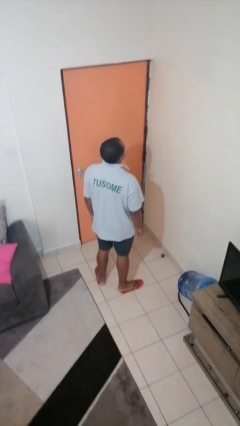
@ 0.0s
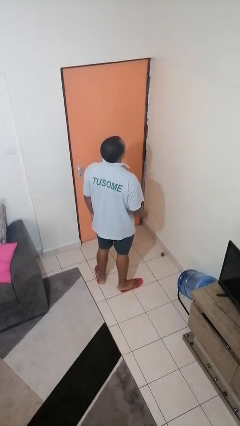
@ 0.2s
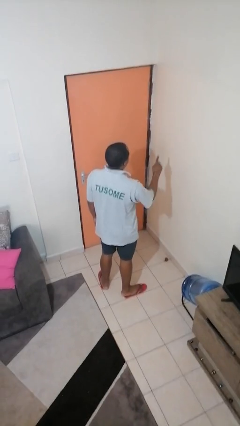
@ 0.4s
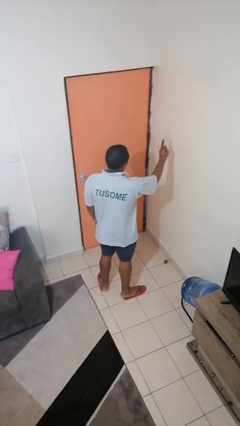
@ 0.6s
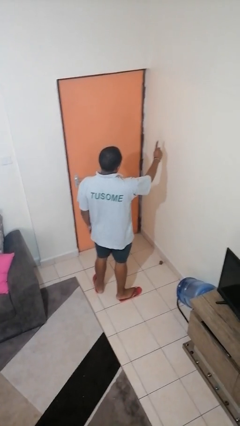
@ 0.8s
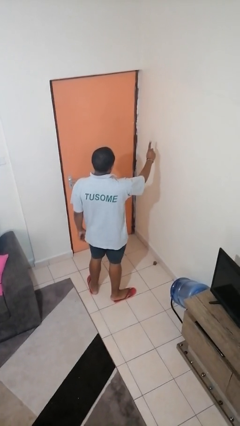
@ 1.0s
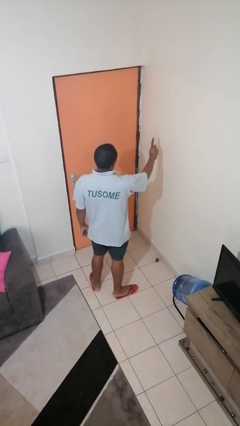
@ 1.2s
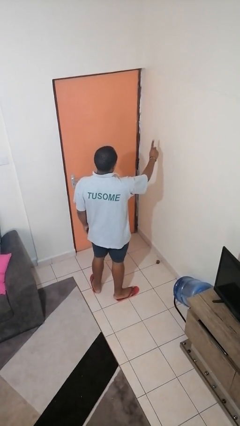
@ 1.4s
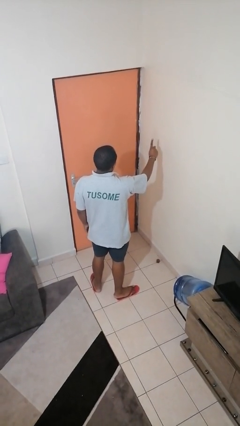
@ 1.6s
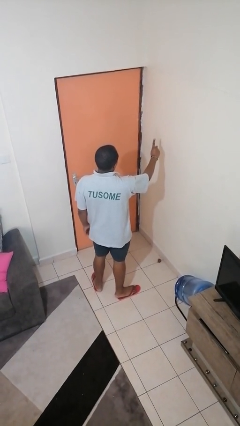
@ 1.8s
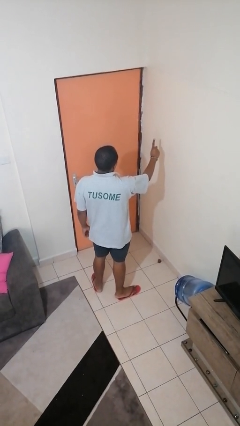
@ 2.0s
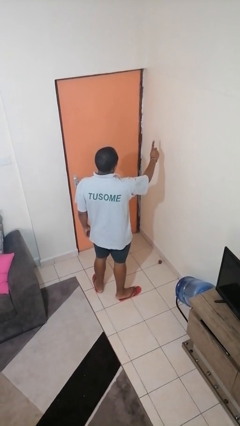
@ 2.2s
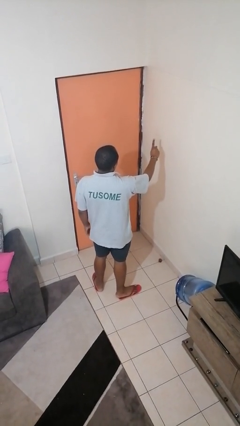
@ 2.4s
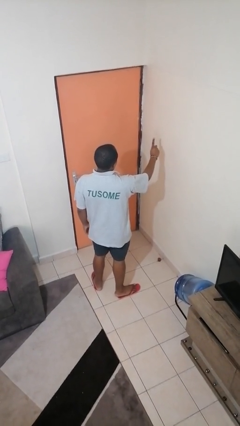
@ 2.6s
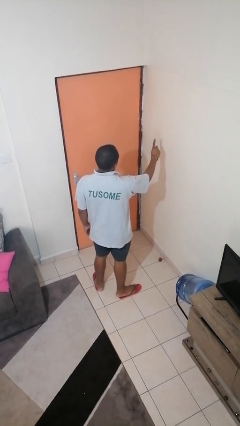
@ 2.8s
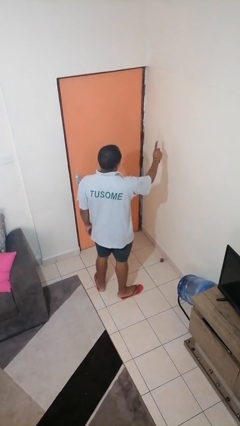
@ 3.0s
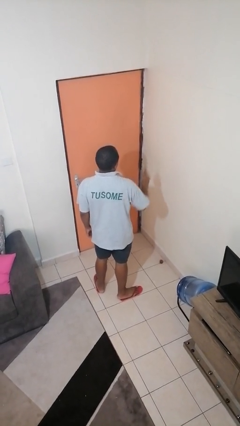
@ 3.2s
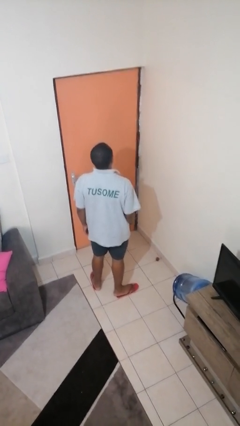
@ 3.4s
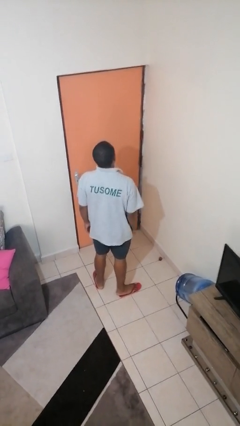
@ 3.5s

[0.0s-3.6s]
person gestures number one

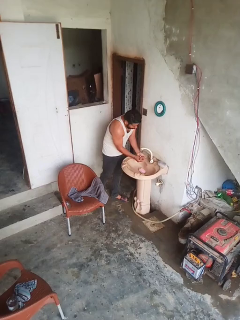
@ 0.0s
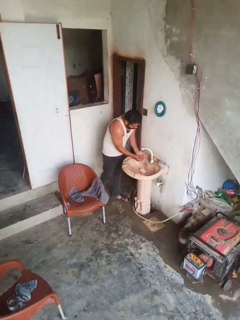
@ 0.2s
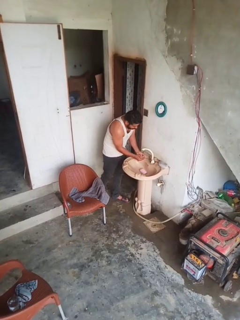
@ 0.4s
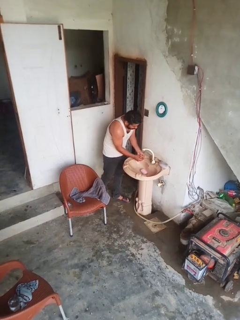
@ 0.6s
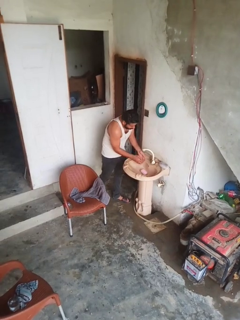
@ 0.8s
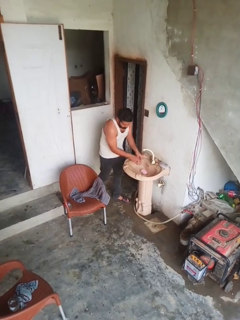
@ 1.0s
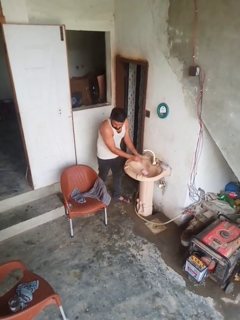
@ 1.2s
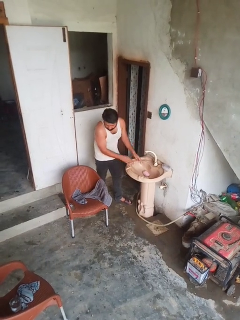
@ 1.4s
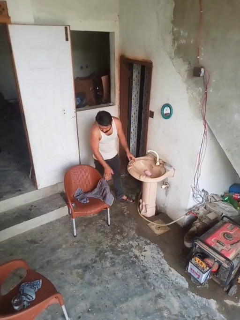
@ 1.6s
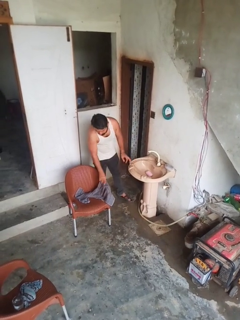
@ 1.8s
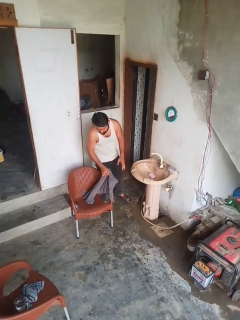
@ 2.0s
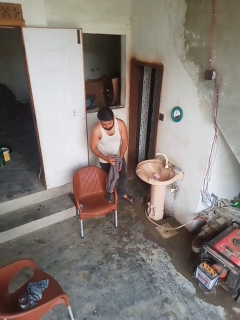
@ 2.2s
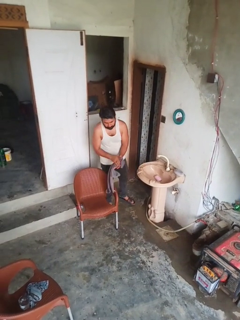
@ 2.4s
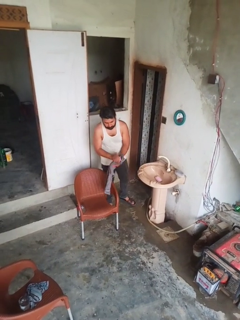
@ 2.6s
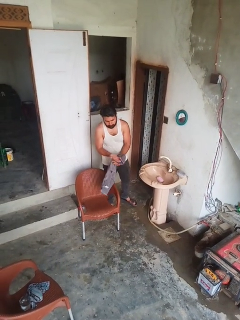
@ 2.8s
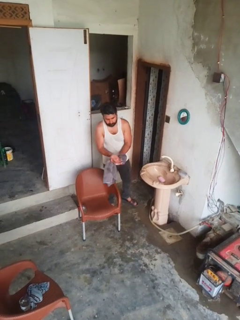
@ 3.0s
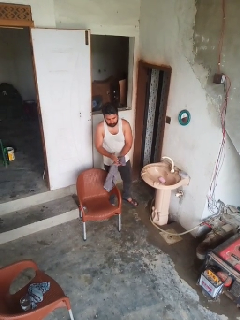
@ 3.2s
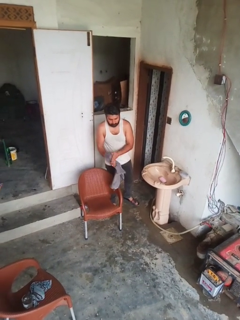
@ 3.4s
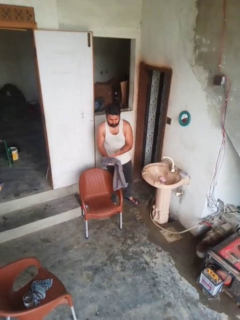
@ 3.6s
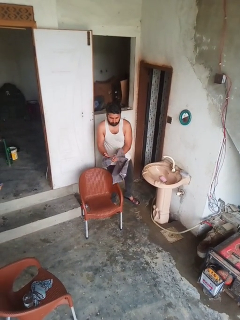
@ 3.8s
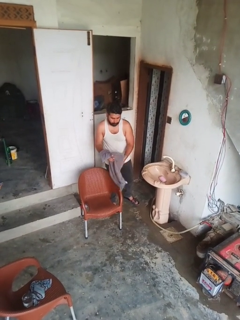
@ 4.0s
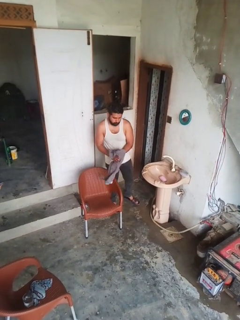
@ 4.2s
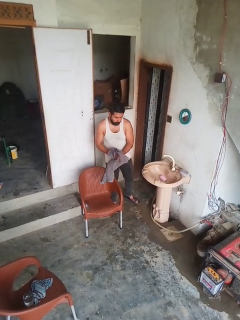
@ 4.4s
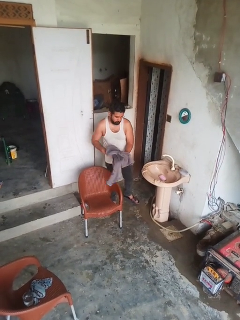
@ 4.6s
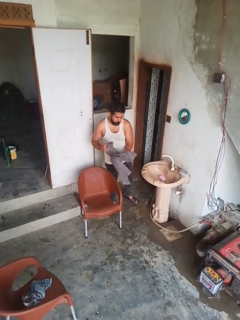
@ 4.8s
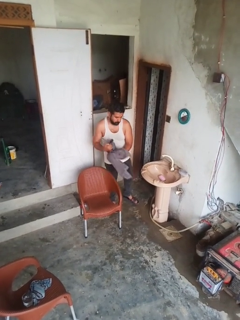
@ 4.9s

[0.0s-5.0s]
person dries hands with towel

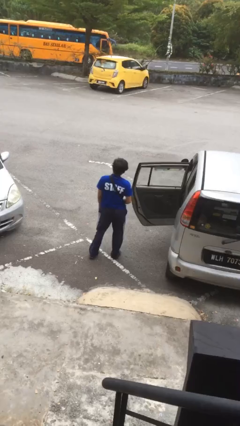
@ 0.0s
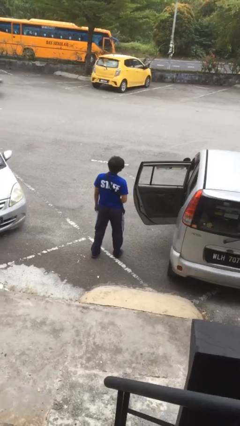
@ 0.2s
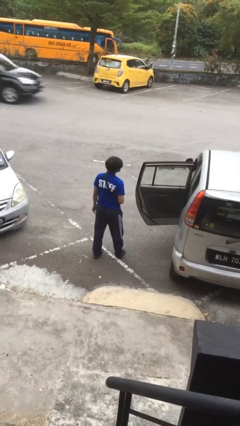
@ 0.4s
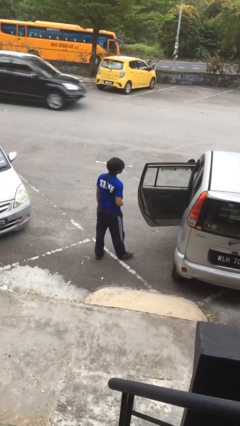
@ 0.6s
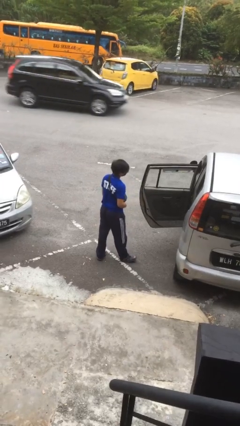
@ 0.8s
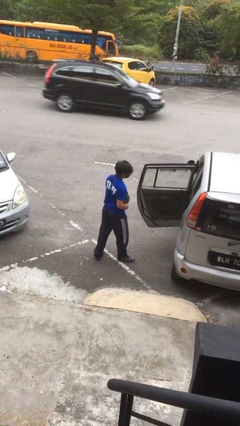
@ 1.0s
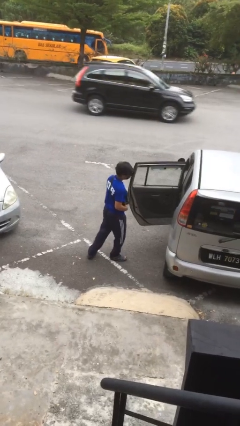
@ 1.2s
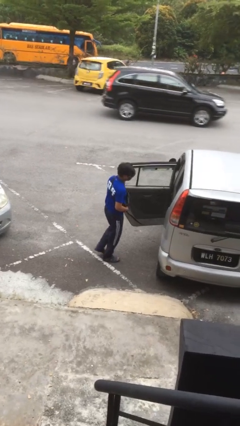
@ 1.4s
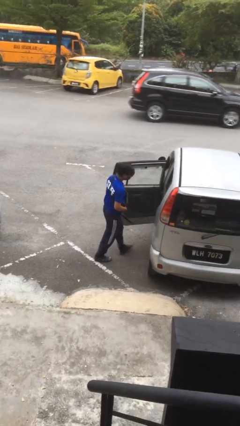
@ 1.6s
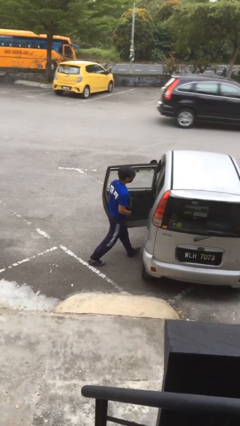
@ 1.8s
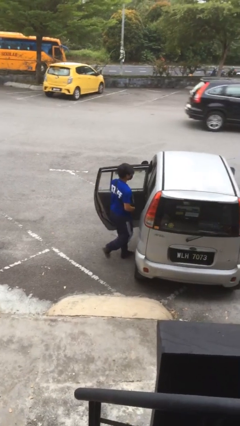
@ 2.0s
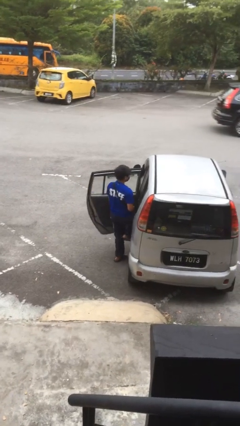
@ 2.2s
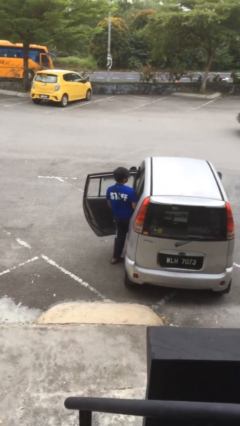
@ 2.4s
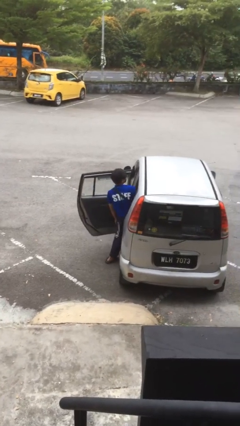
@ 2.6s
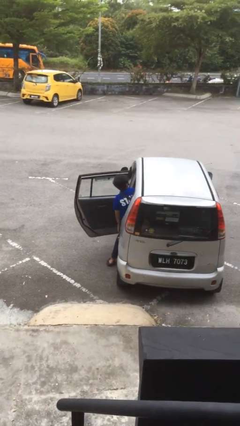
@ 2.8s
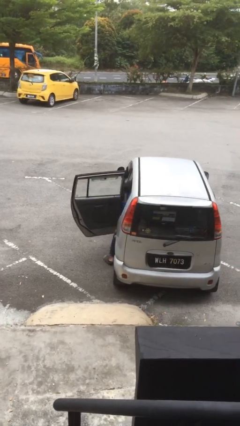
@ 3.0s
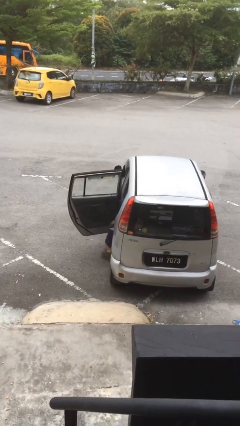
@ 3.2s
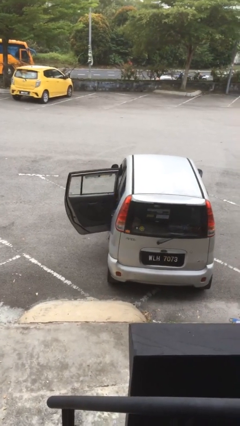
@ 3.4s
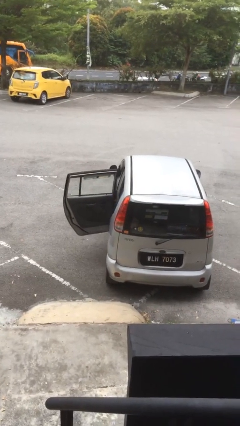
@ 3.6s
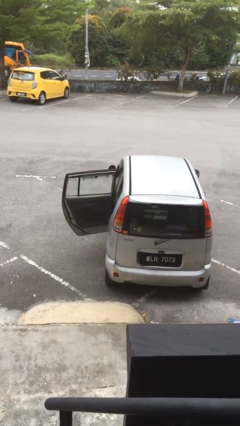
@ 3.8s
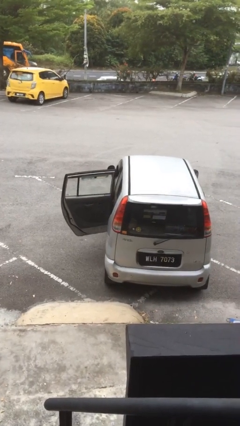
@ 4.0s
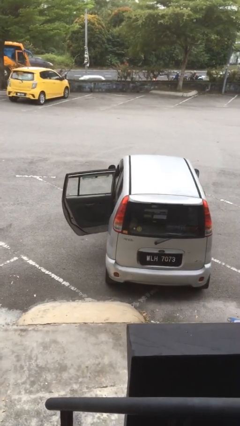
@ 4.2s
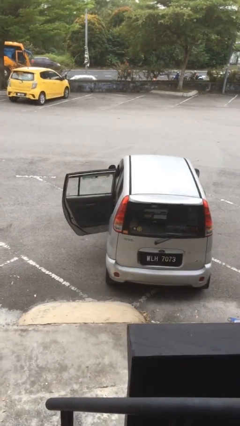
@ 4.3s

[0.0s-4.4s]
person enters car

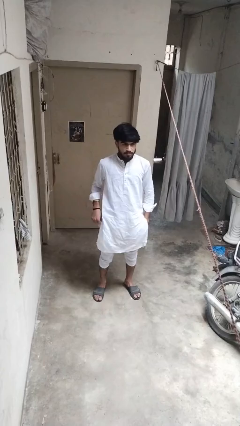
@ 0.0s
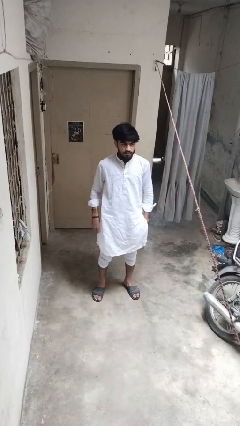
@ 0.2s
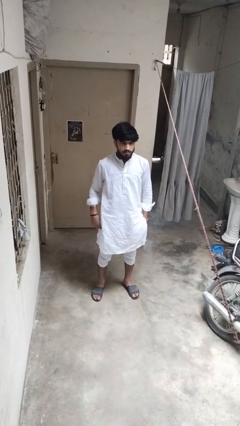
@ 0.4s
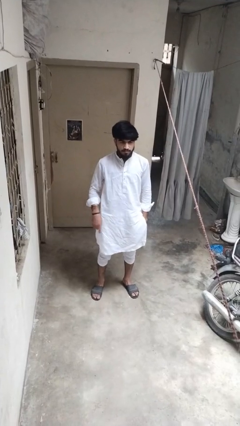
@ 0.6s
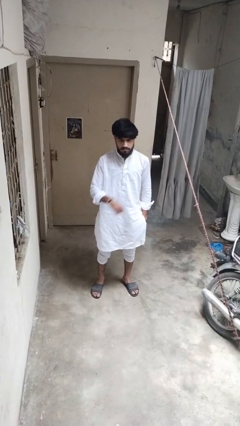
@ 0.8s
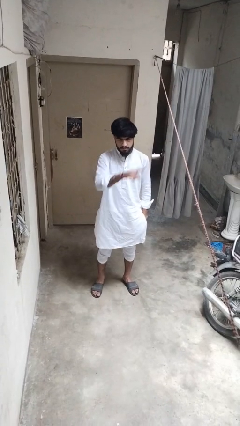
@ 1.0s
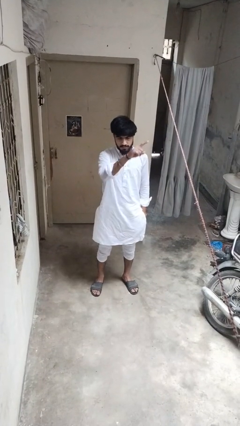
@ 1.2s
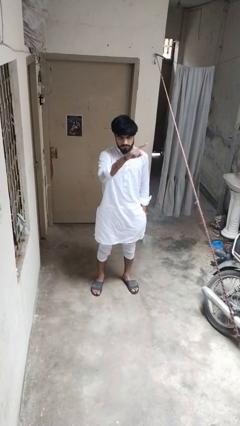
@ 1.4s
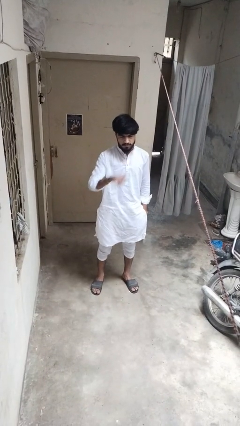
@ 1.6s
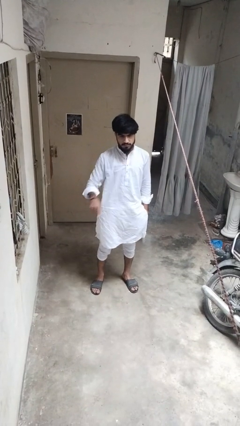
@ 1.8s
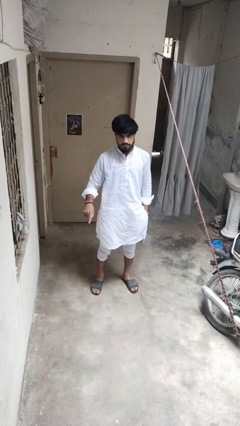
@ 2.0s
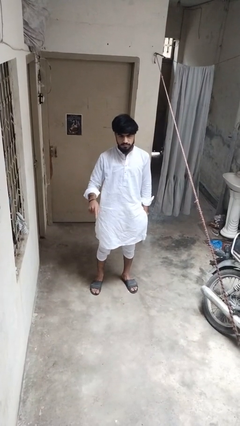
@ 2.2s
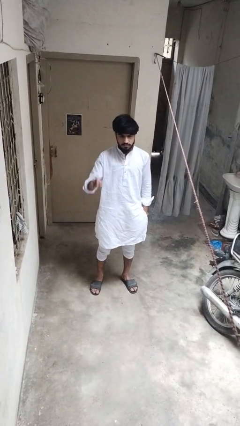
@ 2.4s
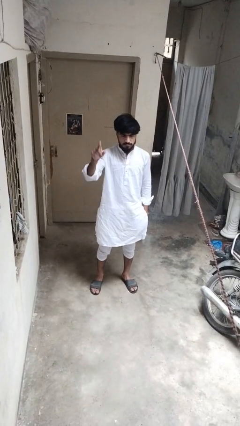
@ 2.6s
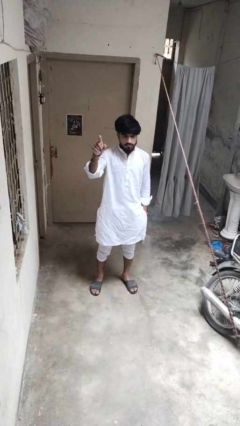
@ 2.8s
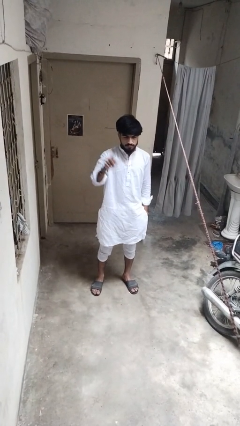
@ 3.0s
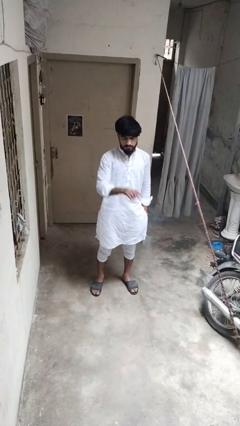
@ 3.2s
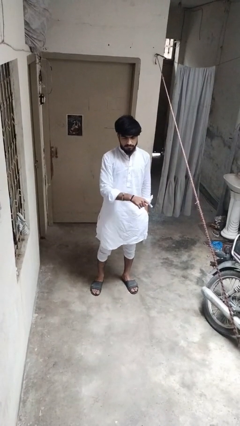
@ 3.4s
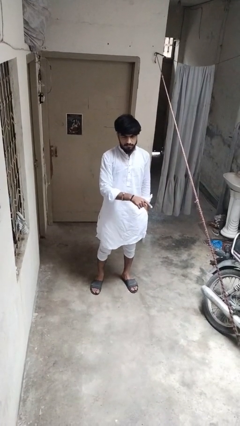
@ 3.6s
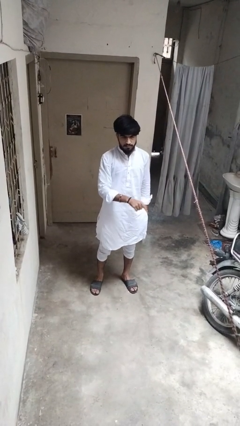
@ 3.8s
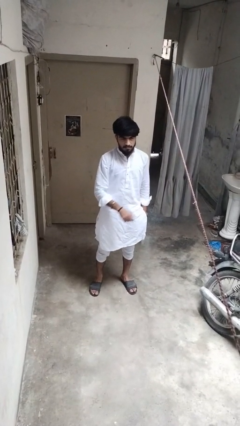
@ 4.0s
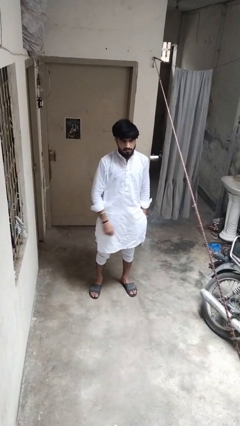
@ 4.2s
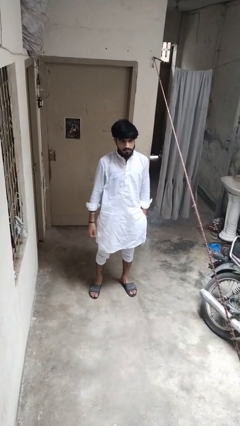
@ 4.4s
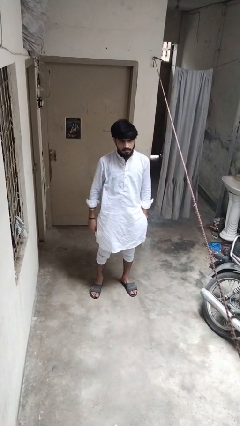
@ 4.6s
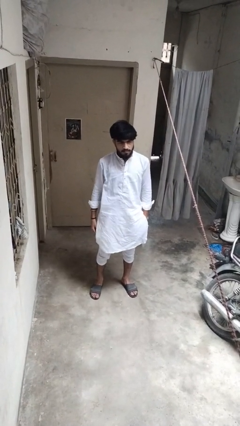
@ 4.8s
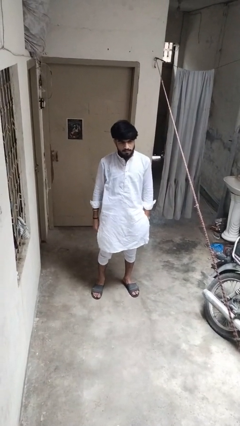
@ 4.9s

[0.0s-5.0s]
person gestures cut

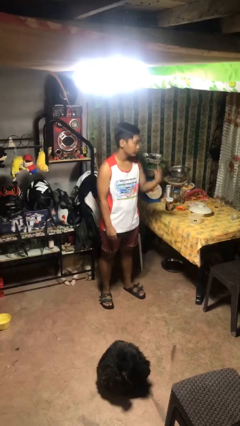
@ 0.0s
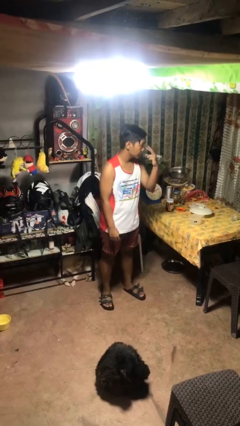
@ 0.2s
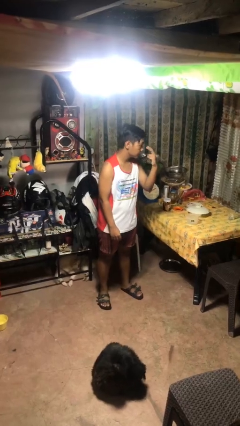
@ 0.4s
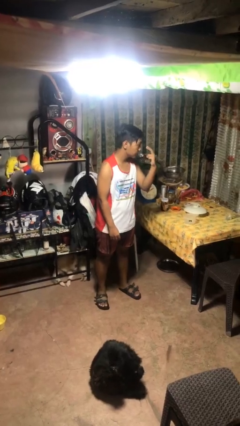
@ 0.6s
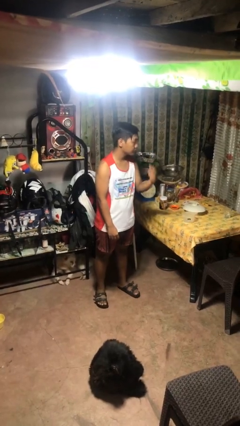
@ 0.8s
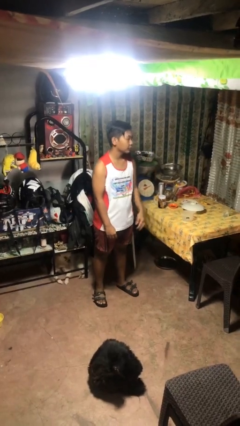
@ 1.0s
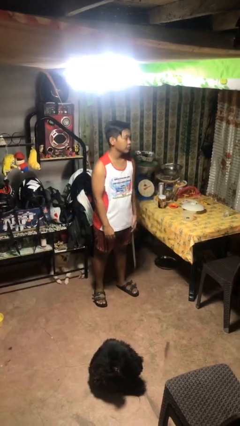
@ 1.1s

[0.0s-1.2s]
person gestures watch closely
